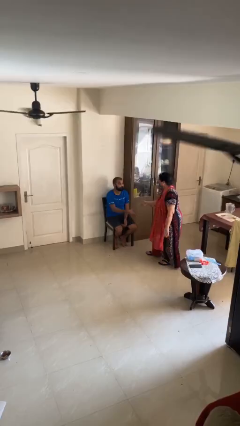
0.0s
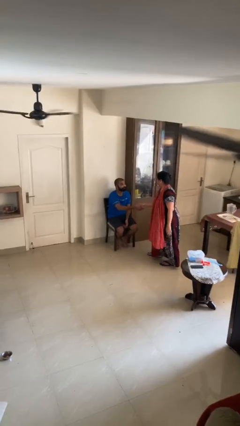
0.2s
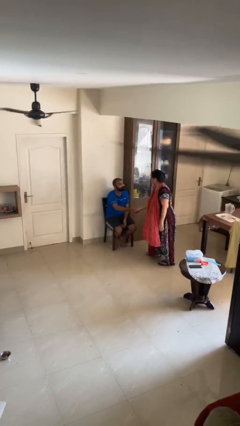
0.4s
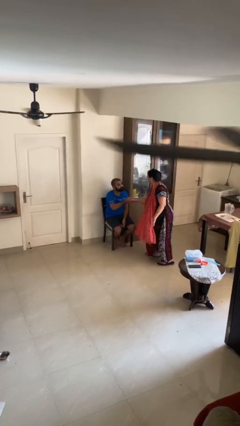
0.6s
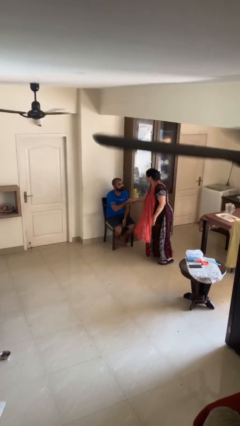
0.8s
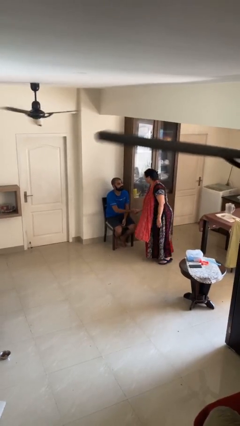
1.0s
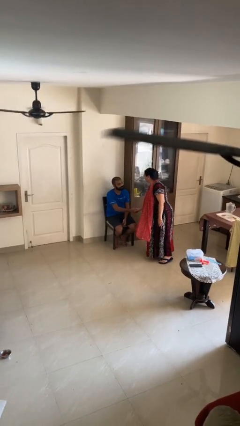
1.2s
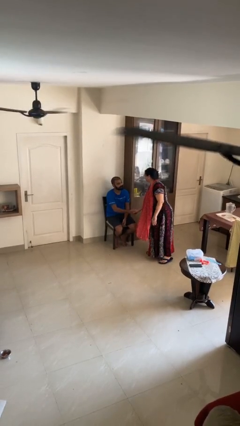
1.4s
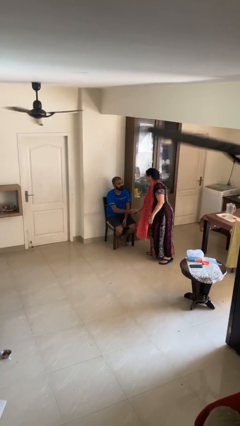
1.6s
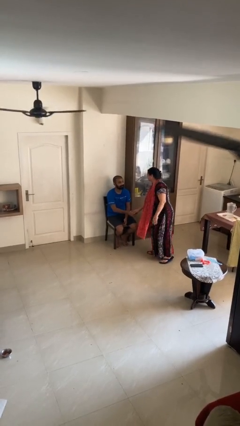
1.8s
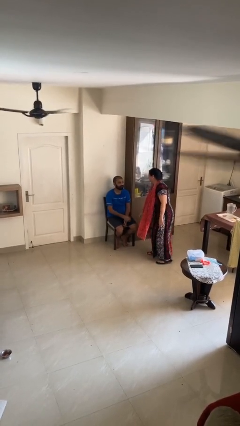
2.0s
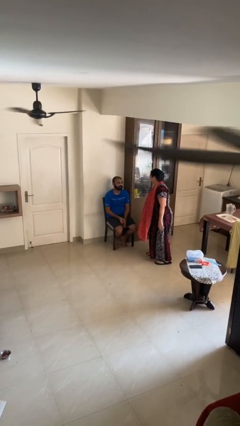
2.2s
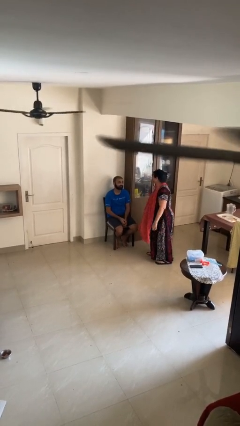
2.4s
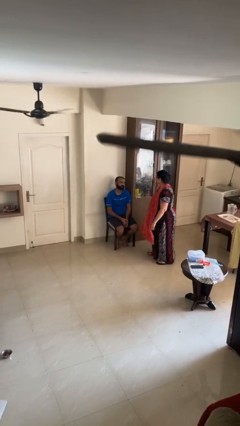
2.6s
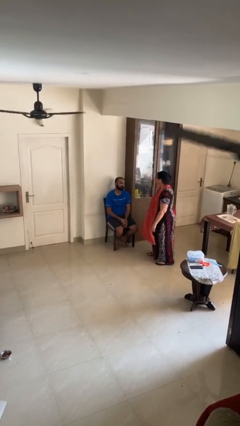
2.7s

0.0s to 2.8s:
person shakes hand

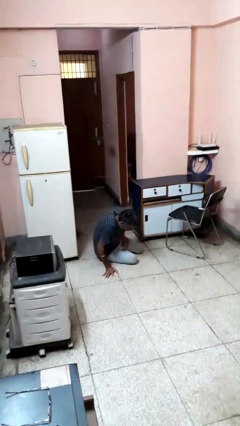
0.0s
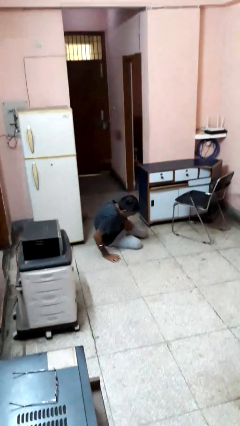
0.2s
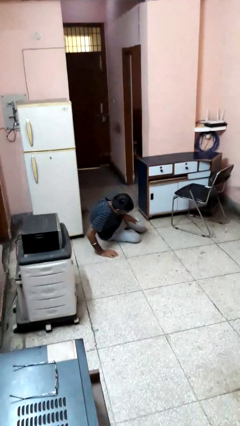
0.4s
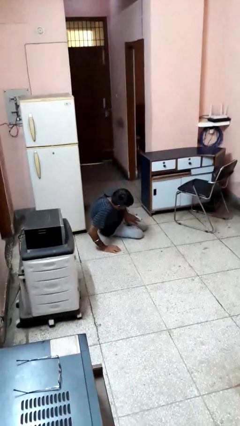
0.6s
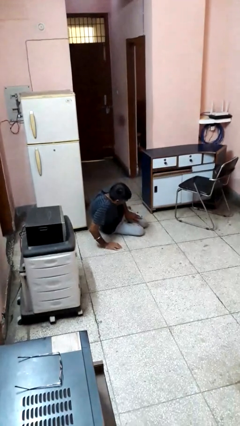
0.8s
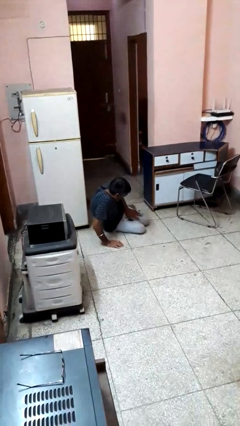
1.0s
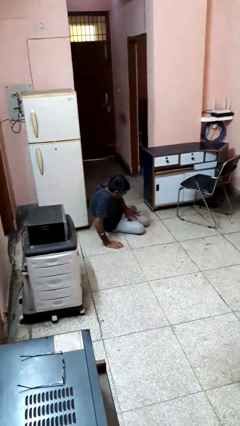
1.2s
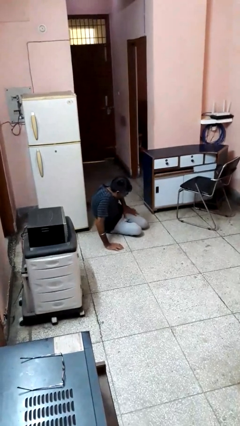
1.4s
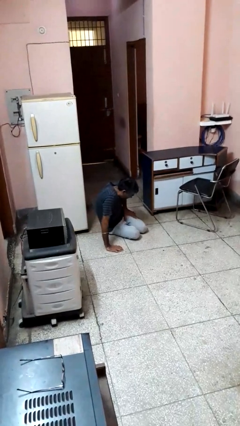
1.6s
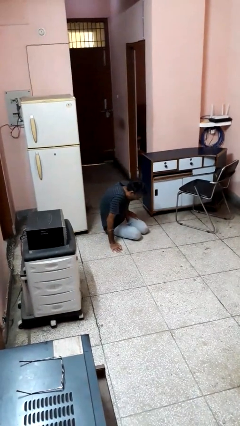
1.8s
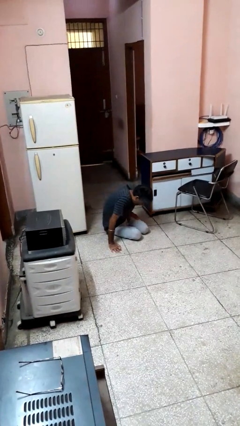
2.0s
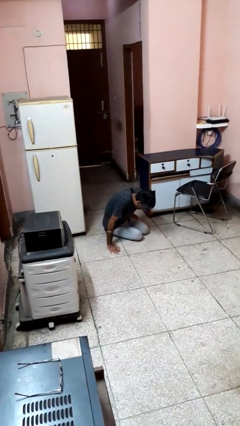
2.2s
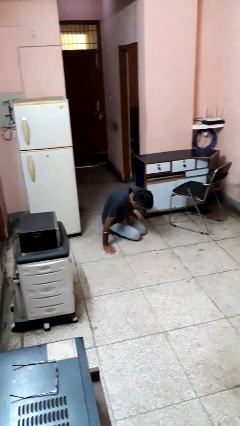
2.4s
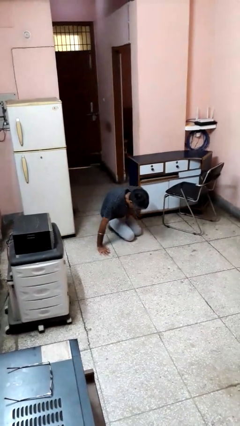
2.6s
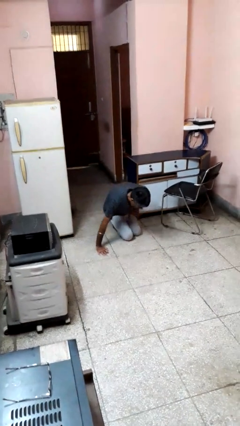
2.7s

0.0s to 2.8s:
person lies down on floor

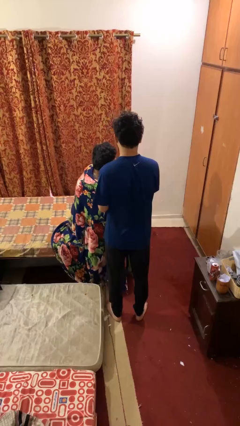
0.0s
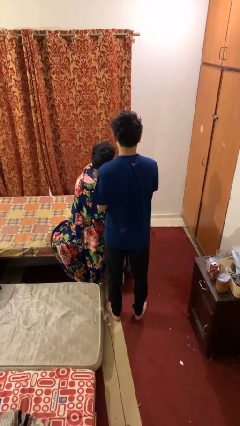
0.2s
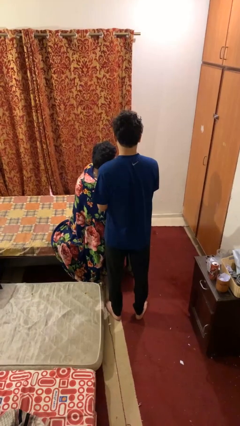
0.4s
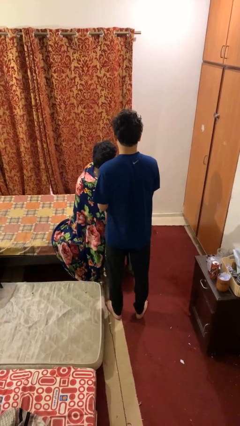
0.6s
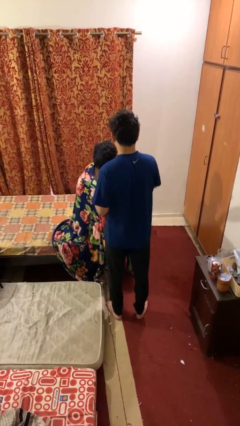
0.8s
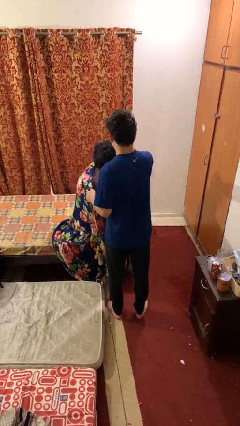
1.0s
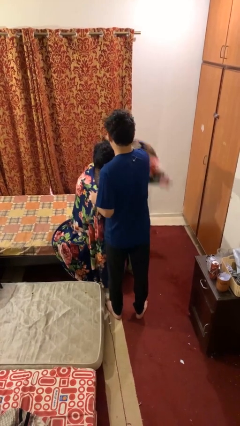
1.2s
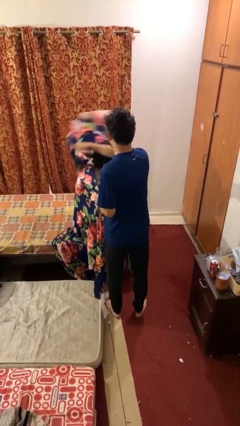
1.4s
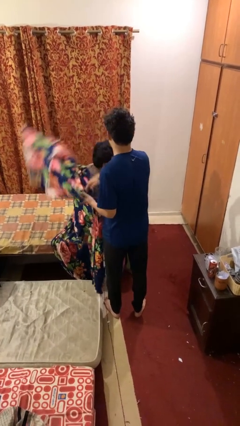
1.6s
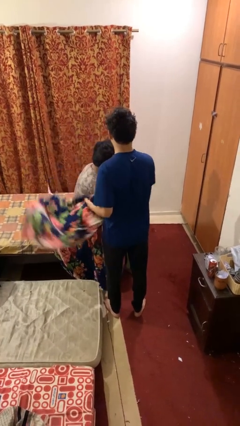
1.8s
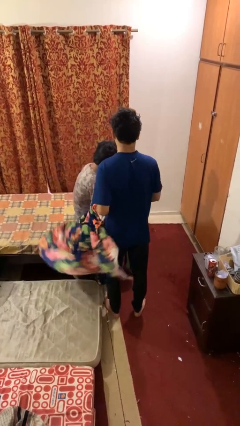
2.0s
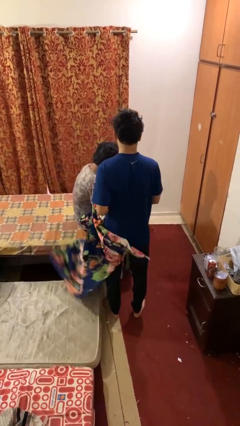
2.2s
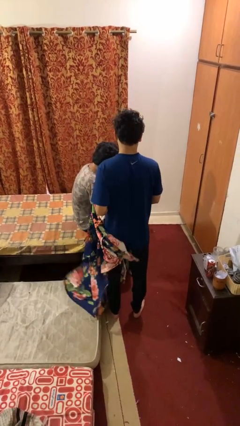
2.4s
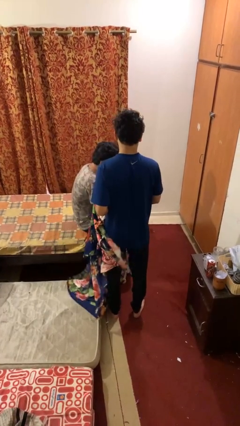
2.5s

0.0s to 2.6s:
person uncovers friend with blanket

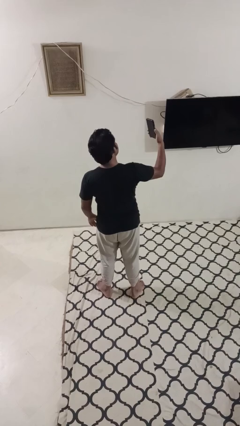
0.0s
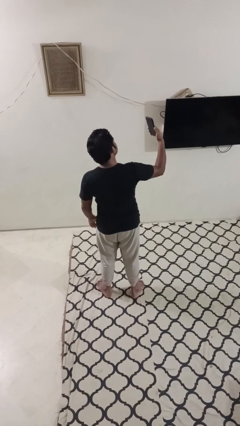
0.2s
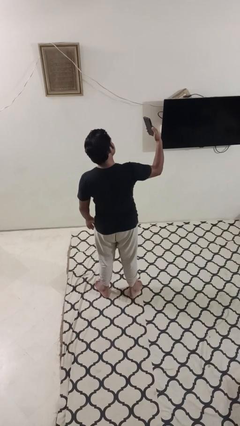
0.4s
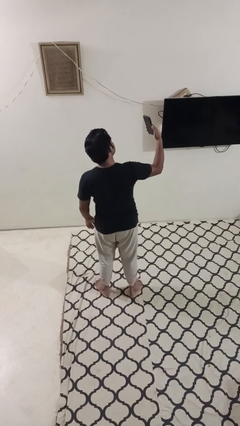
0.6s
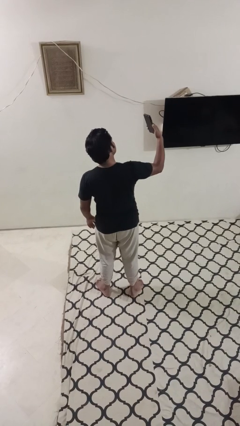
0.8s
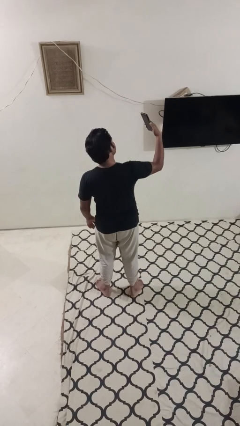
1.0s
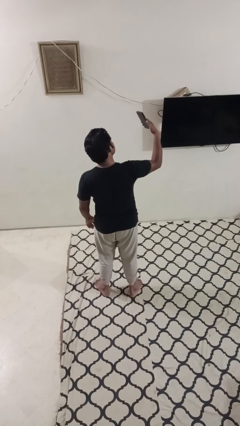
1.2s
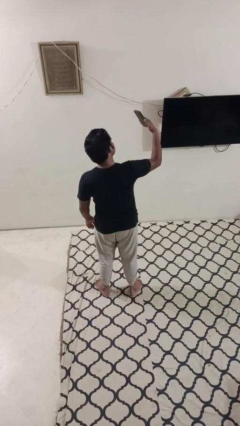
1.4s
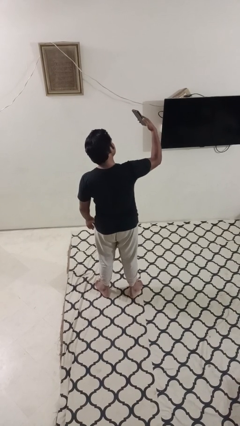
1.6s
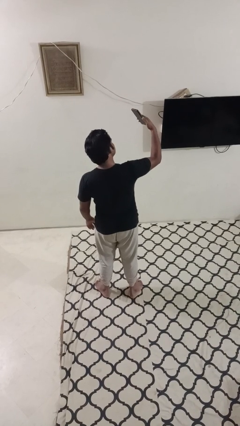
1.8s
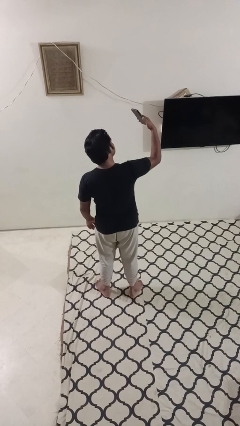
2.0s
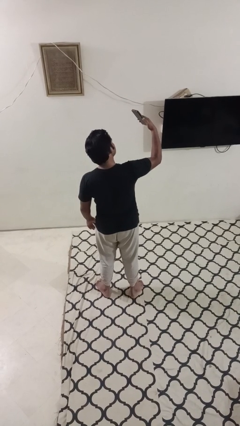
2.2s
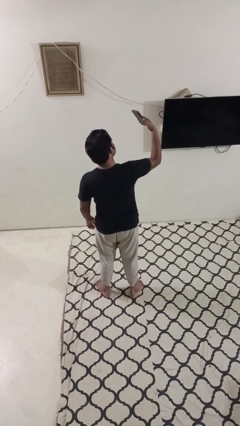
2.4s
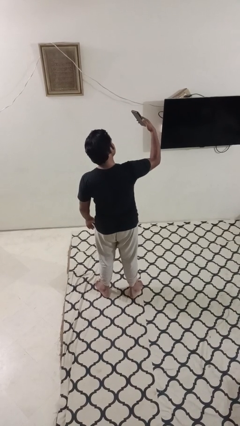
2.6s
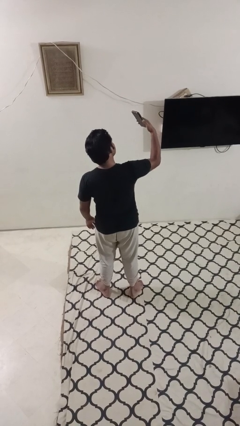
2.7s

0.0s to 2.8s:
person takes selfie

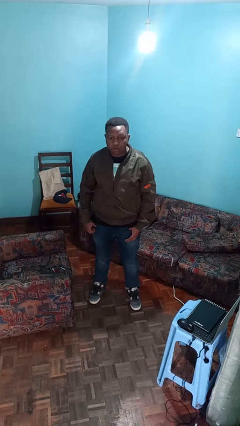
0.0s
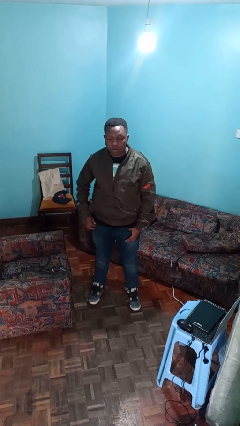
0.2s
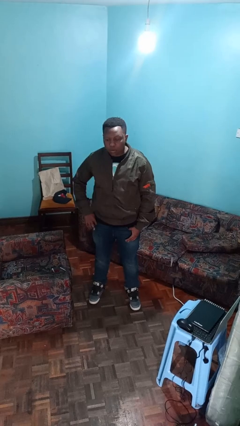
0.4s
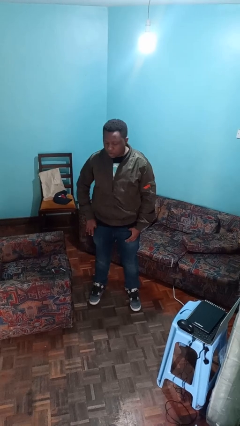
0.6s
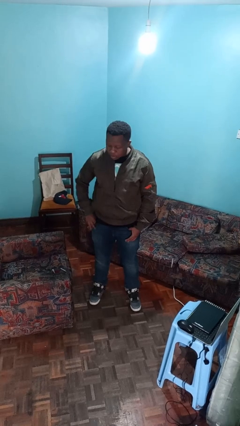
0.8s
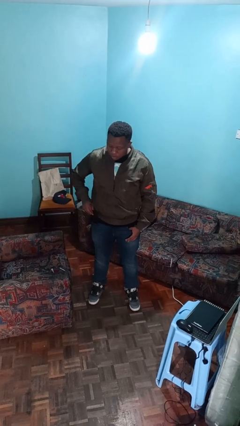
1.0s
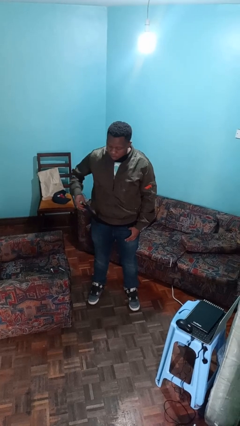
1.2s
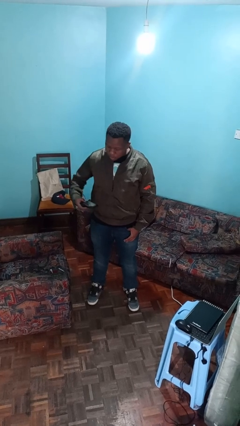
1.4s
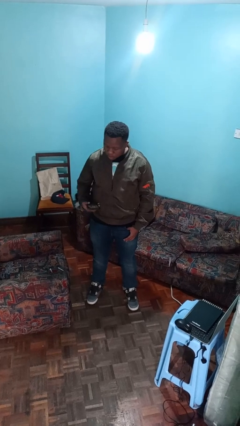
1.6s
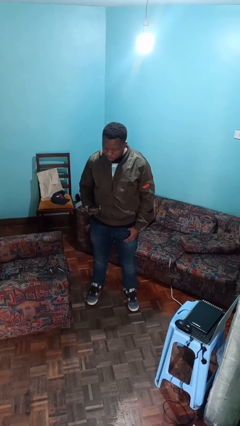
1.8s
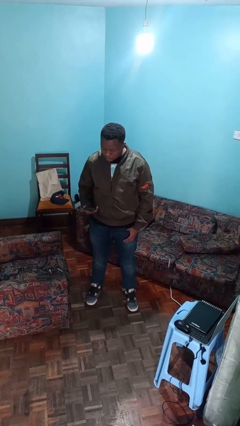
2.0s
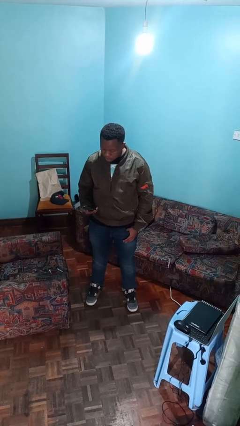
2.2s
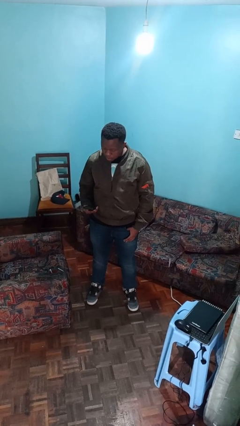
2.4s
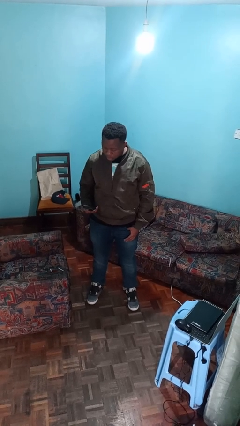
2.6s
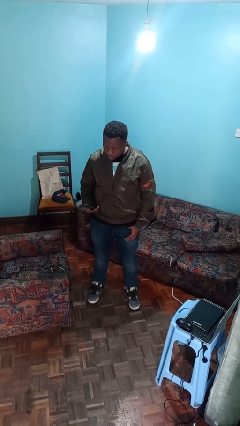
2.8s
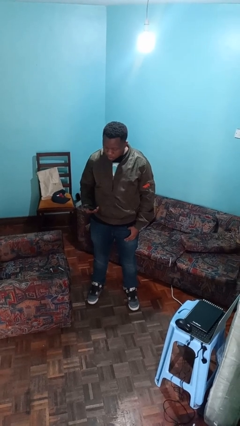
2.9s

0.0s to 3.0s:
person takes phone from pocket

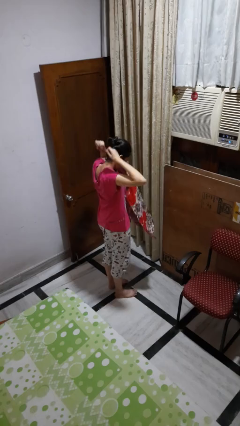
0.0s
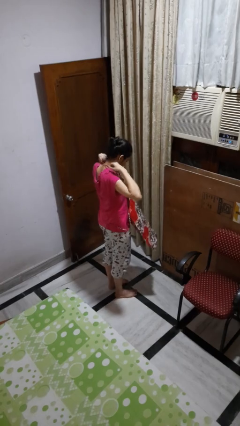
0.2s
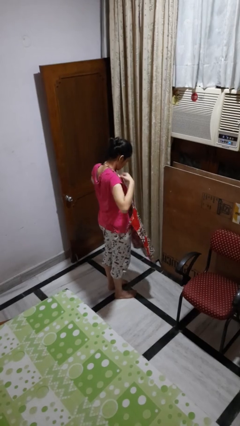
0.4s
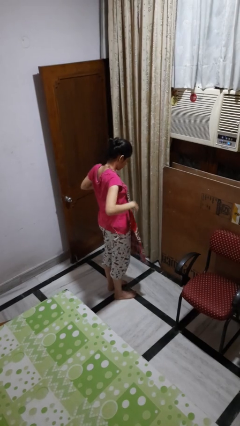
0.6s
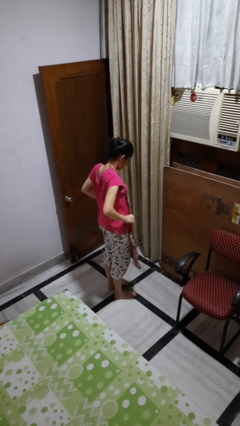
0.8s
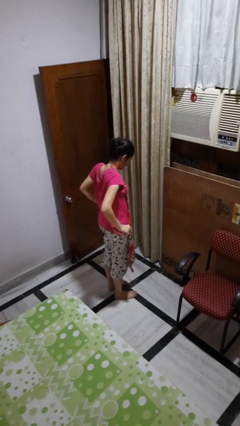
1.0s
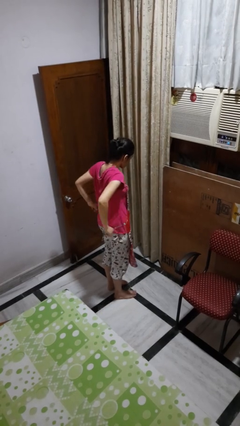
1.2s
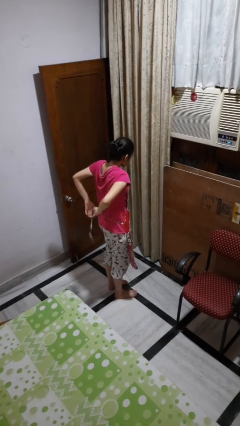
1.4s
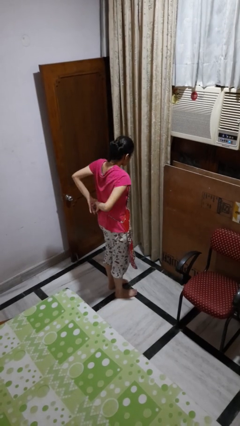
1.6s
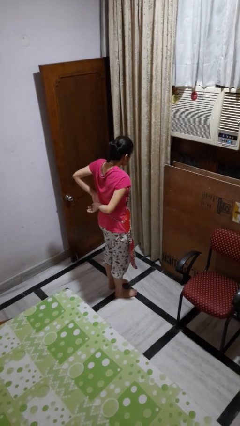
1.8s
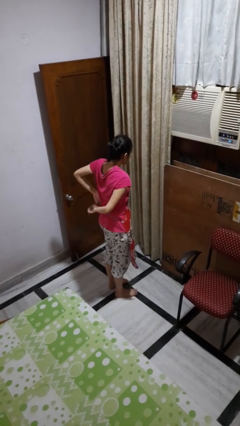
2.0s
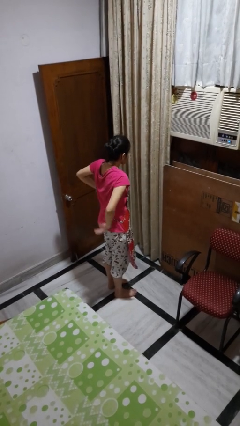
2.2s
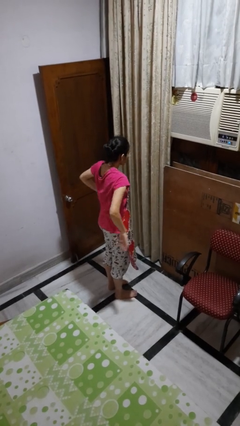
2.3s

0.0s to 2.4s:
person puts on apron

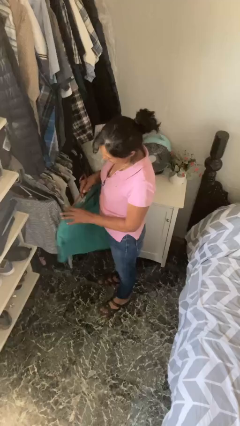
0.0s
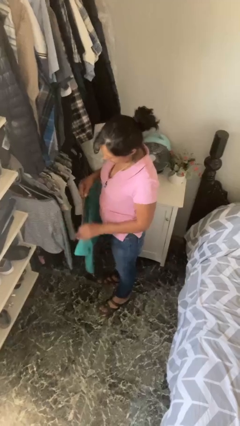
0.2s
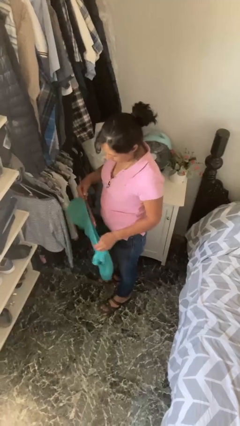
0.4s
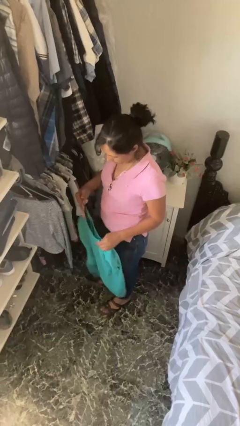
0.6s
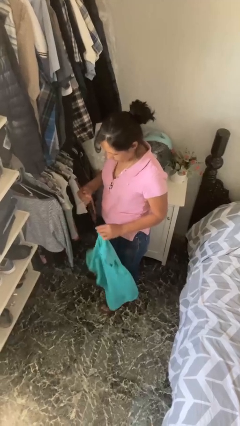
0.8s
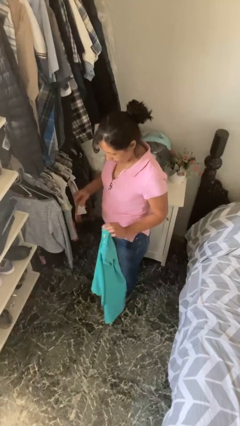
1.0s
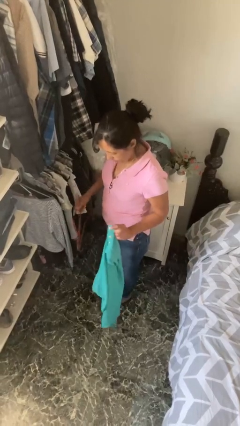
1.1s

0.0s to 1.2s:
person takes clothes from closet
